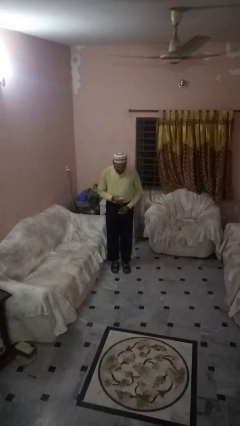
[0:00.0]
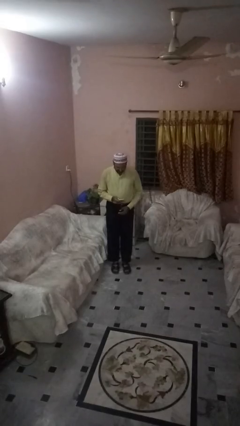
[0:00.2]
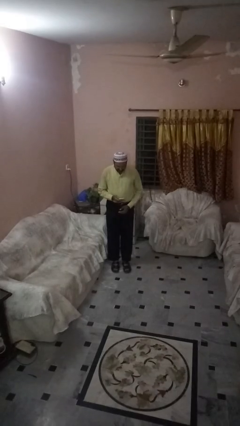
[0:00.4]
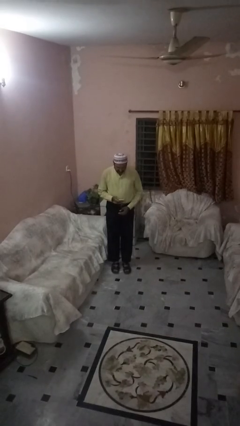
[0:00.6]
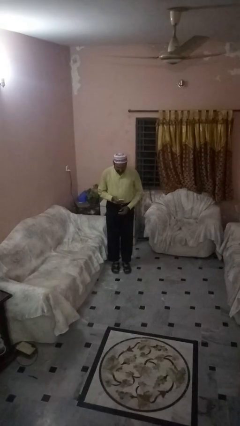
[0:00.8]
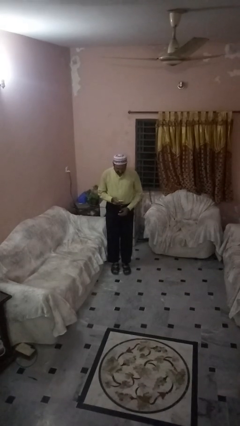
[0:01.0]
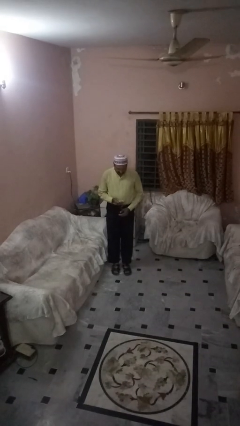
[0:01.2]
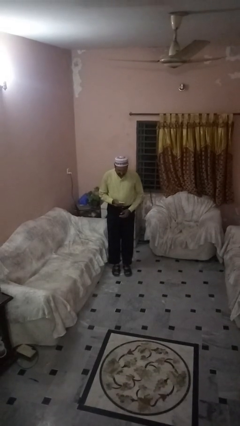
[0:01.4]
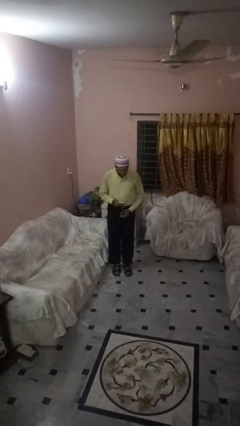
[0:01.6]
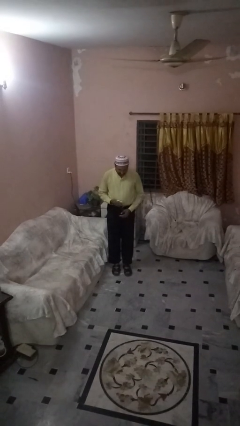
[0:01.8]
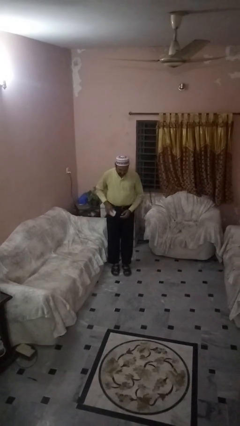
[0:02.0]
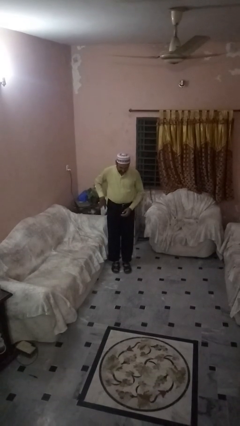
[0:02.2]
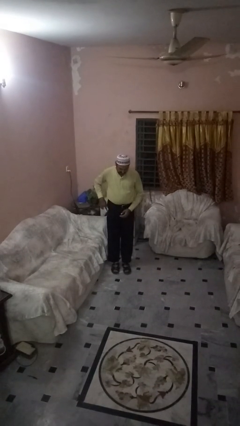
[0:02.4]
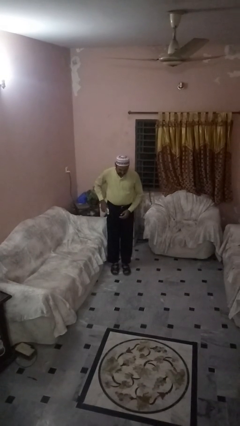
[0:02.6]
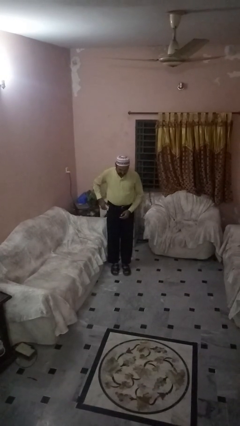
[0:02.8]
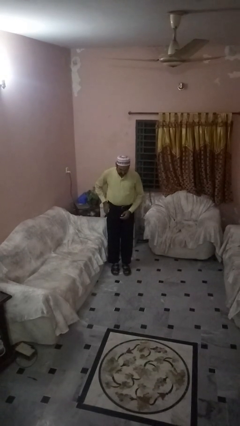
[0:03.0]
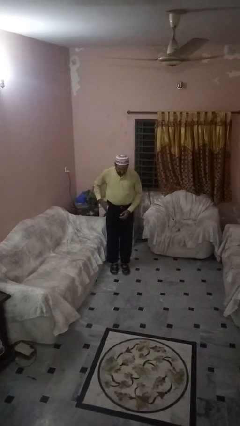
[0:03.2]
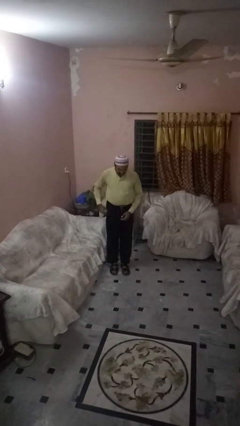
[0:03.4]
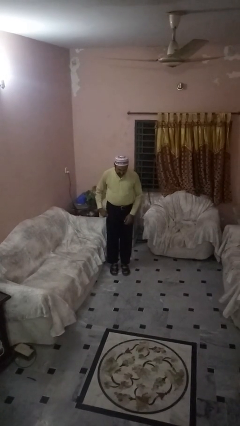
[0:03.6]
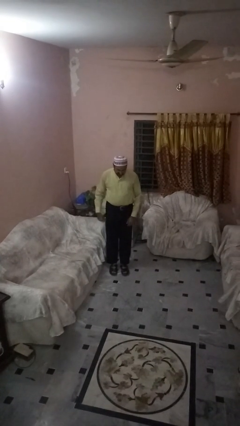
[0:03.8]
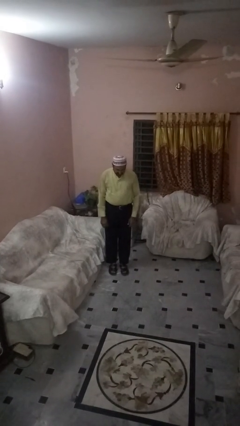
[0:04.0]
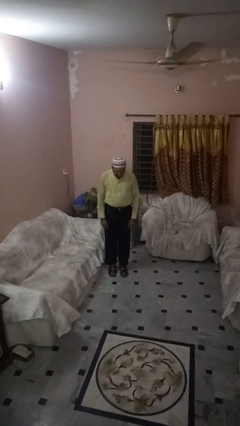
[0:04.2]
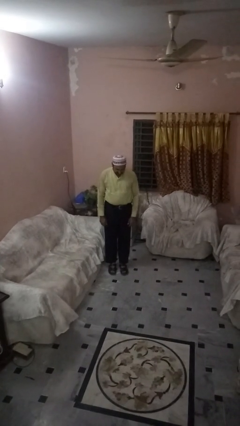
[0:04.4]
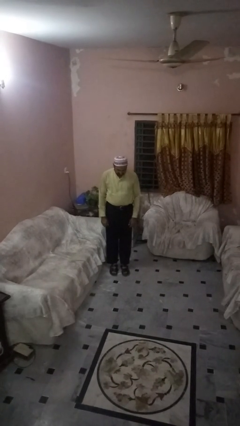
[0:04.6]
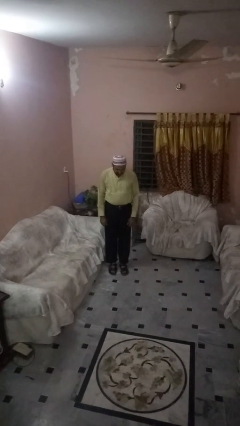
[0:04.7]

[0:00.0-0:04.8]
person puts phone into pocket

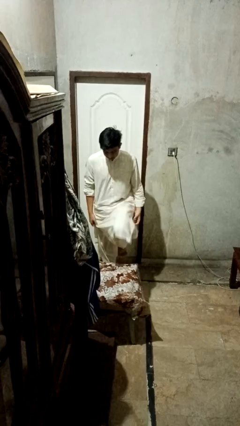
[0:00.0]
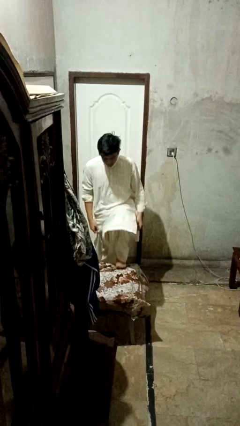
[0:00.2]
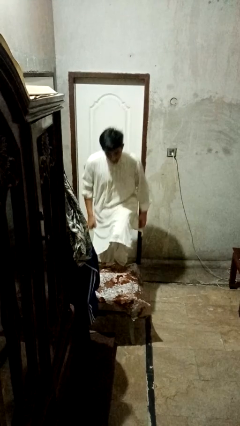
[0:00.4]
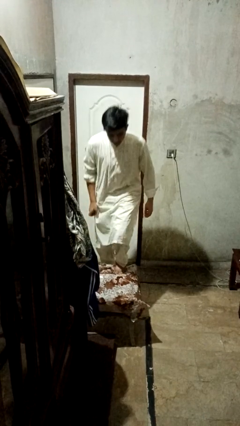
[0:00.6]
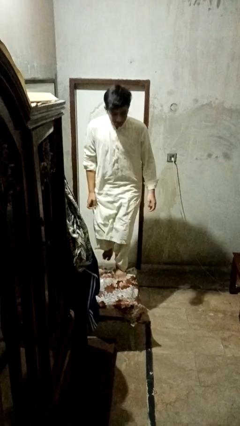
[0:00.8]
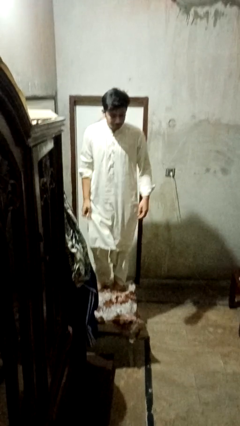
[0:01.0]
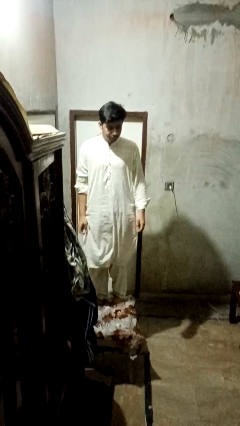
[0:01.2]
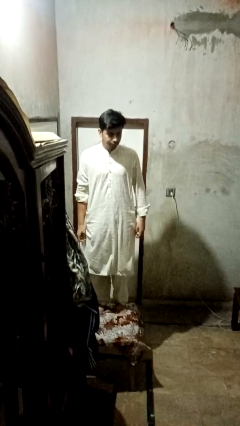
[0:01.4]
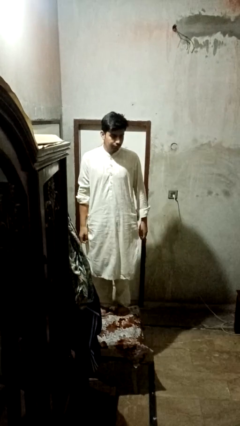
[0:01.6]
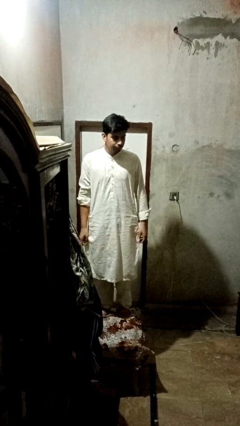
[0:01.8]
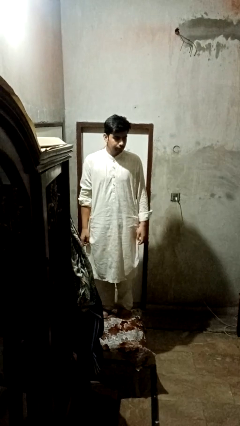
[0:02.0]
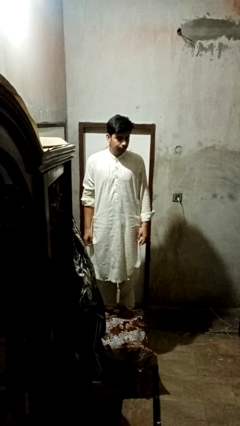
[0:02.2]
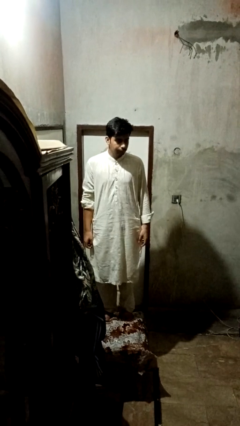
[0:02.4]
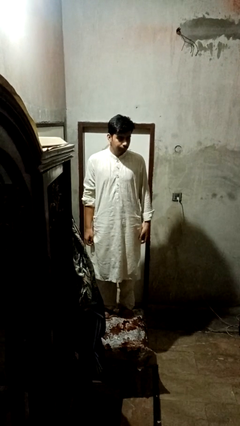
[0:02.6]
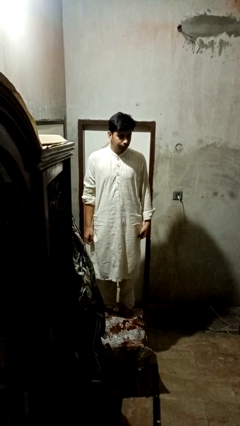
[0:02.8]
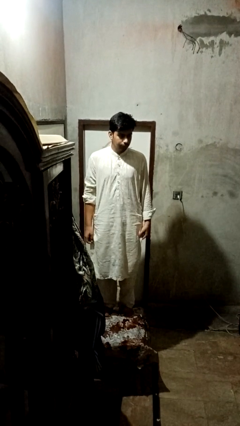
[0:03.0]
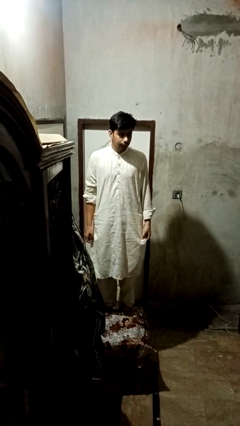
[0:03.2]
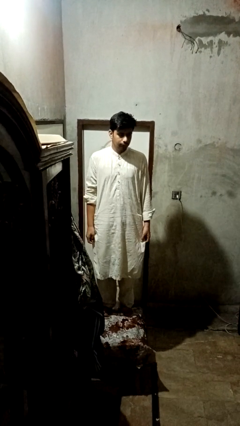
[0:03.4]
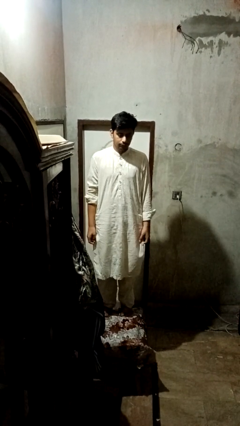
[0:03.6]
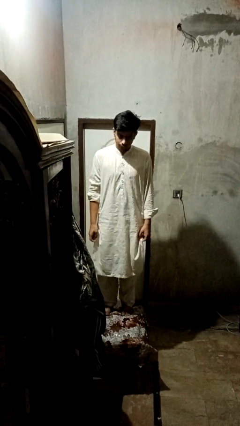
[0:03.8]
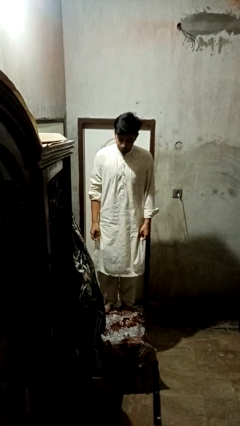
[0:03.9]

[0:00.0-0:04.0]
person climbs on table

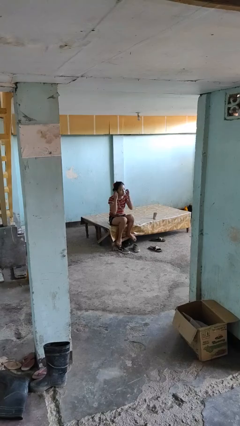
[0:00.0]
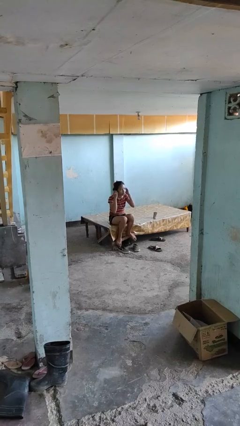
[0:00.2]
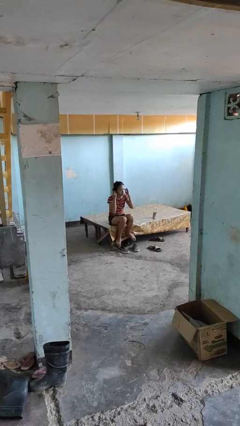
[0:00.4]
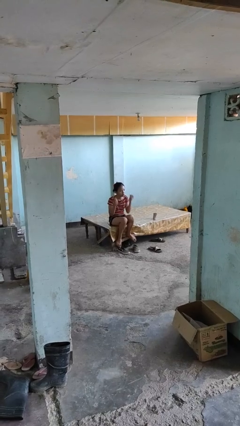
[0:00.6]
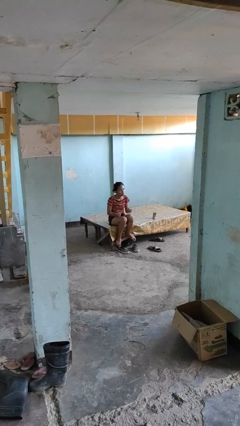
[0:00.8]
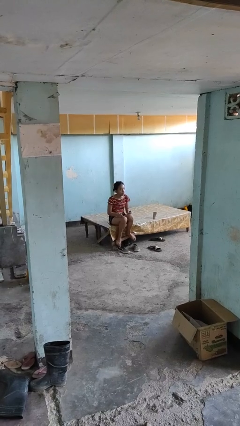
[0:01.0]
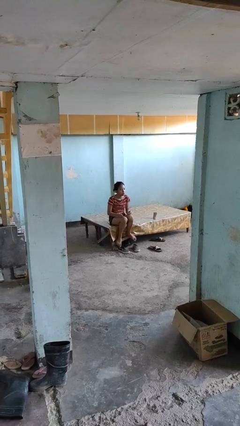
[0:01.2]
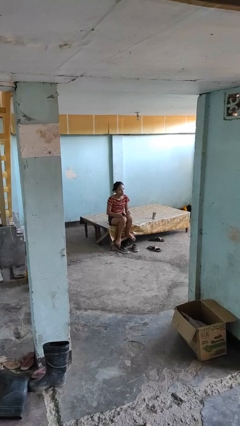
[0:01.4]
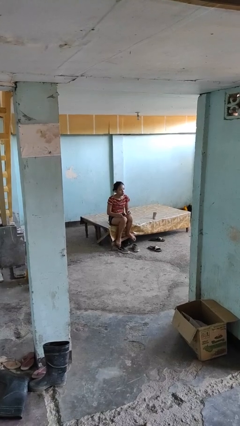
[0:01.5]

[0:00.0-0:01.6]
person takes off headphones

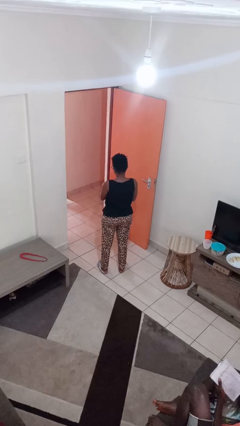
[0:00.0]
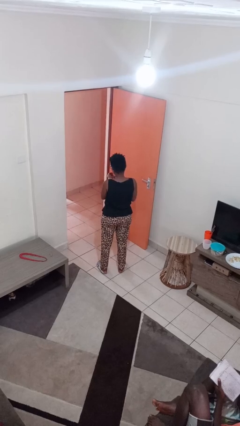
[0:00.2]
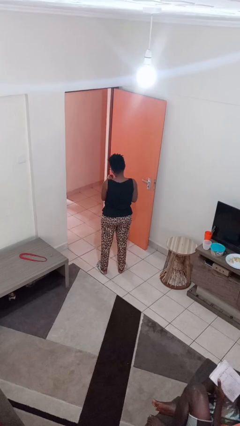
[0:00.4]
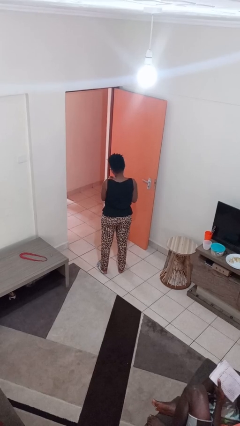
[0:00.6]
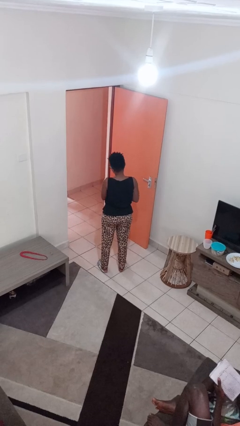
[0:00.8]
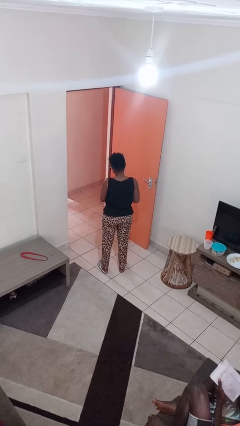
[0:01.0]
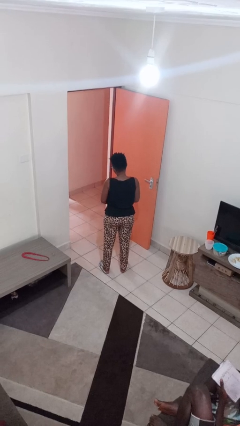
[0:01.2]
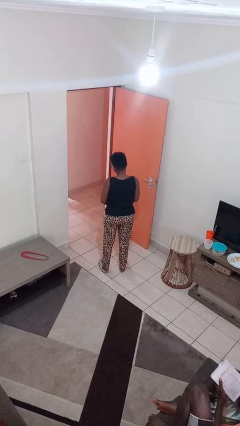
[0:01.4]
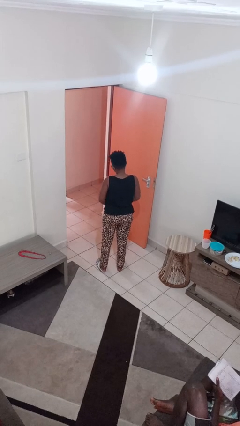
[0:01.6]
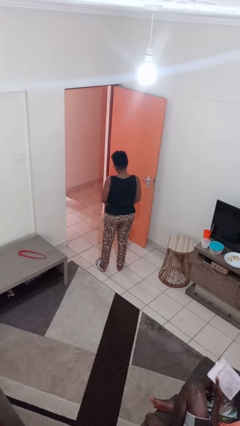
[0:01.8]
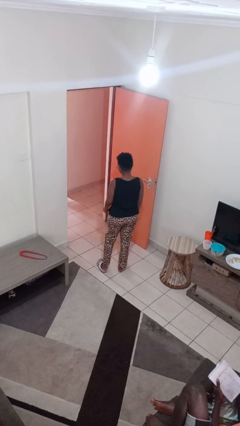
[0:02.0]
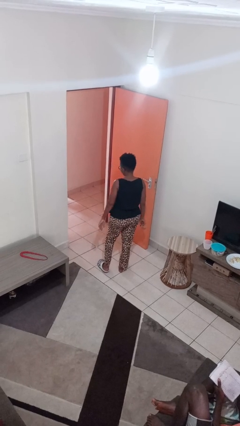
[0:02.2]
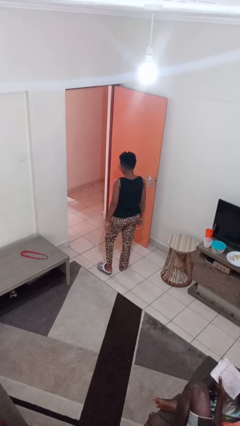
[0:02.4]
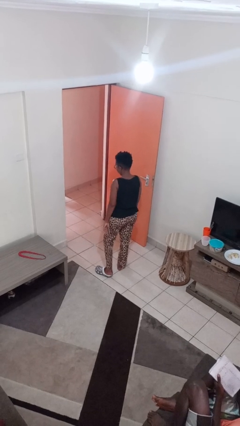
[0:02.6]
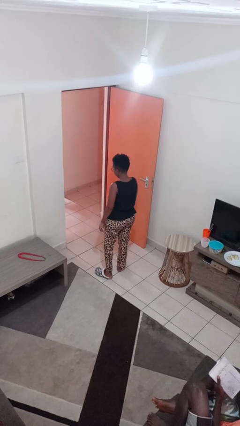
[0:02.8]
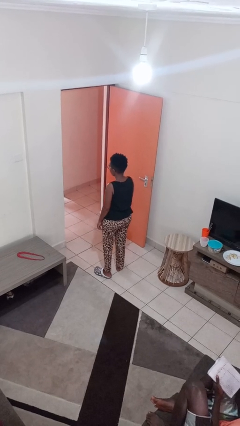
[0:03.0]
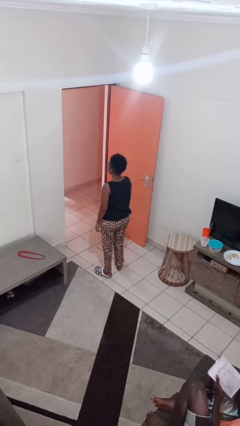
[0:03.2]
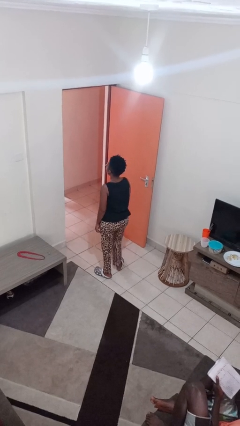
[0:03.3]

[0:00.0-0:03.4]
person takes off wristwatch

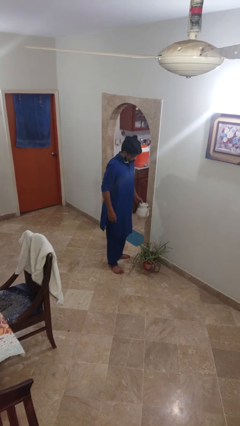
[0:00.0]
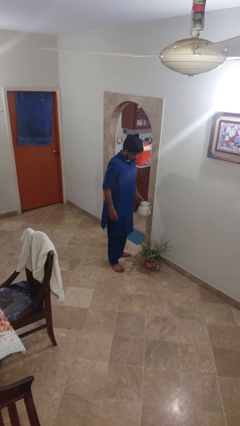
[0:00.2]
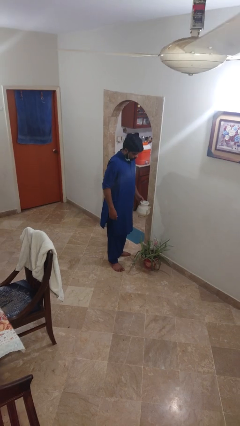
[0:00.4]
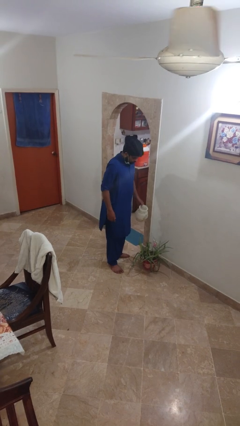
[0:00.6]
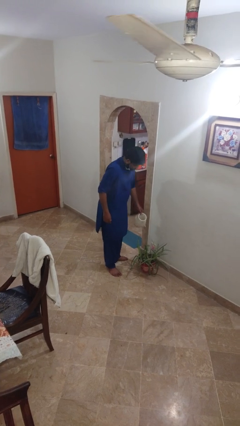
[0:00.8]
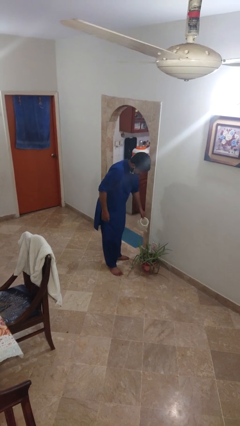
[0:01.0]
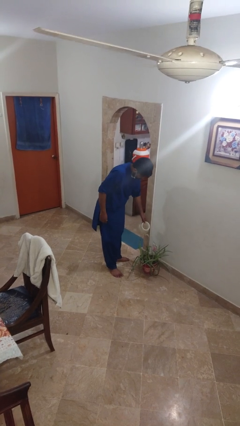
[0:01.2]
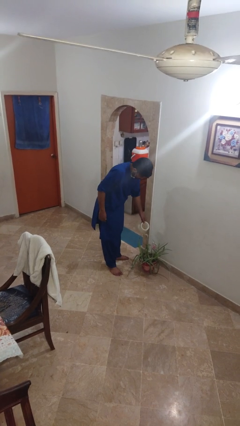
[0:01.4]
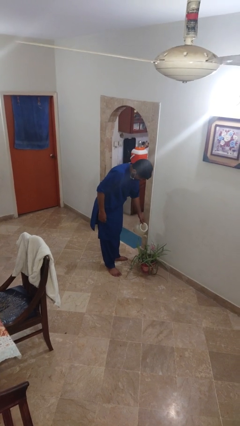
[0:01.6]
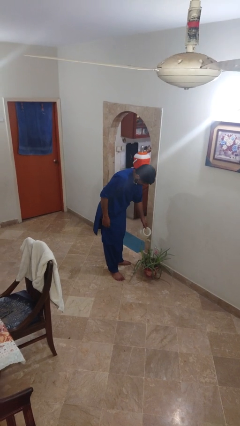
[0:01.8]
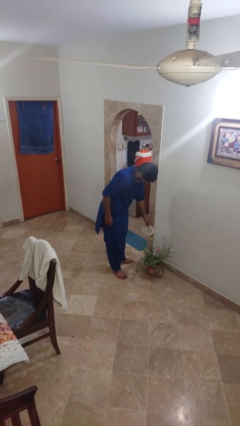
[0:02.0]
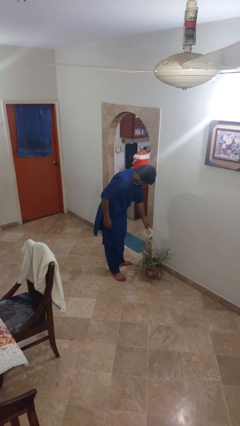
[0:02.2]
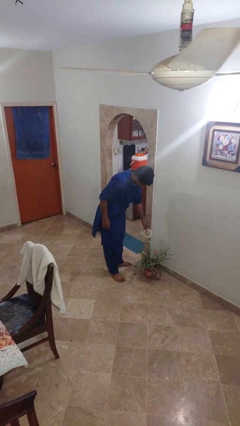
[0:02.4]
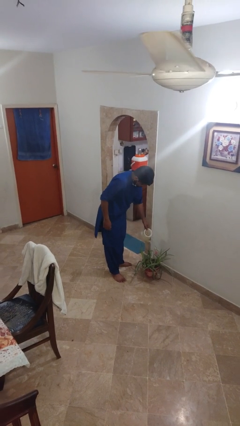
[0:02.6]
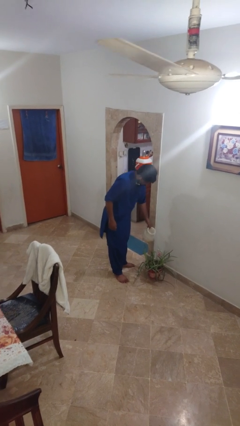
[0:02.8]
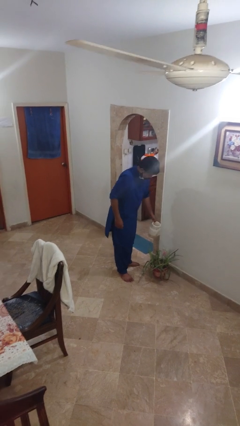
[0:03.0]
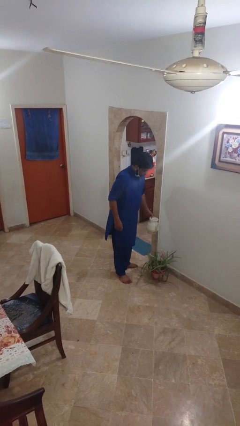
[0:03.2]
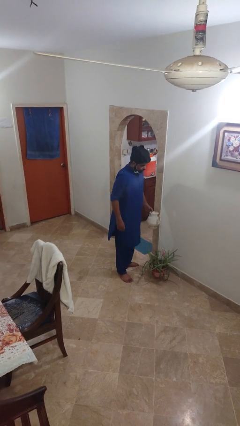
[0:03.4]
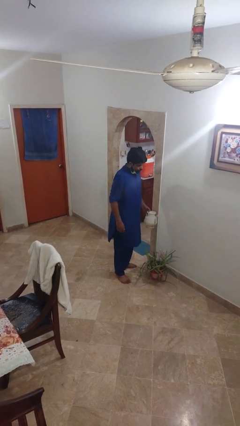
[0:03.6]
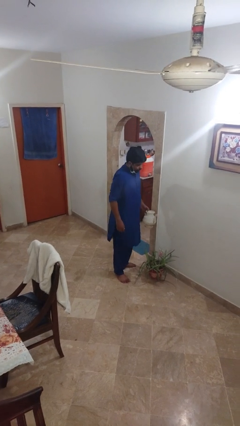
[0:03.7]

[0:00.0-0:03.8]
person waters houseplant

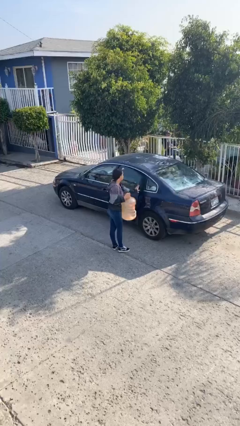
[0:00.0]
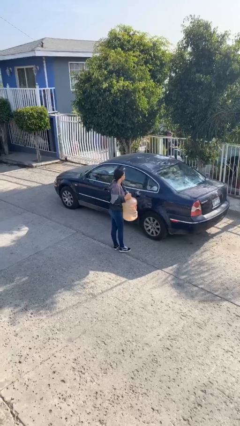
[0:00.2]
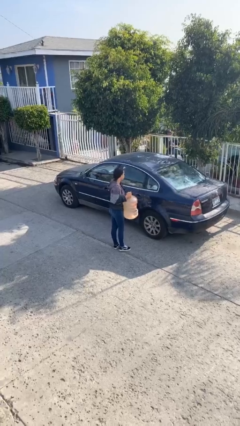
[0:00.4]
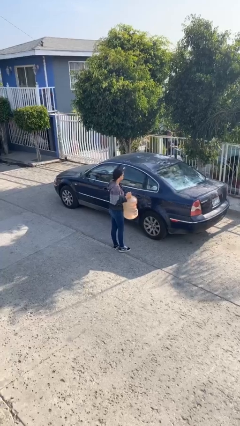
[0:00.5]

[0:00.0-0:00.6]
person closes car door
